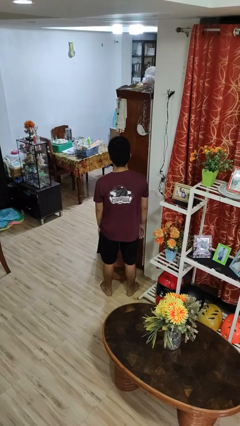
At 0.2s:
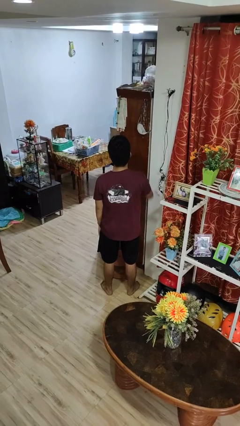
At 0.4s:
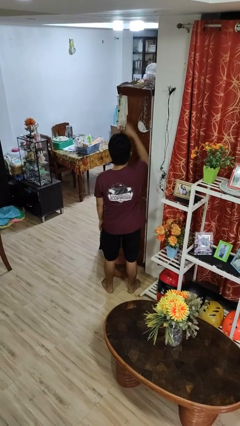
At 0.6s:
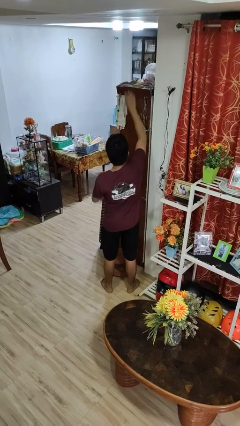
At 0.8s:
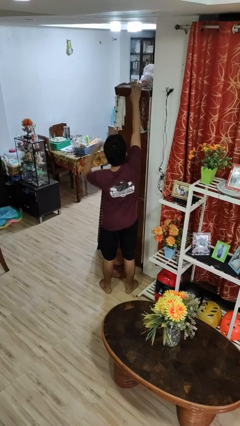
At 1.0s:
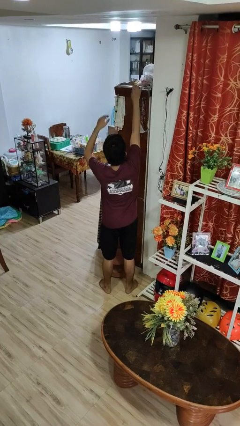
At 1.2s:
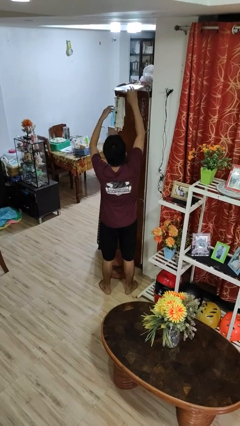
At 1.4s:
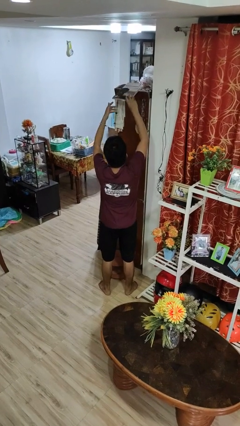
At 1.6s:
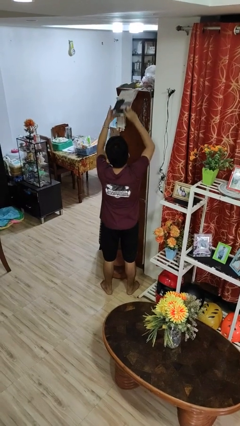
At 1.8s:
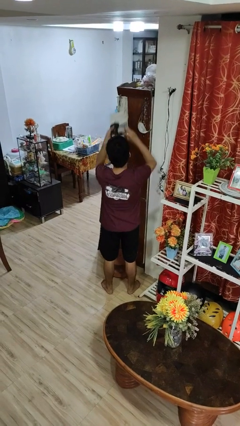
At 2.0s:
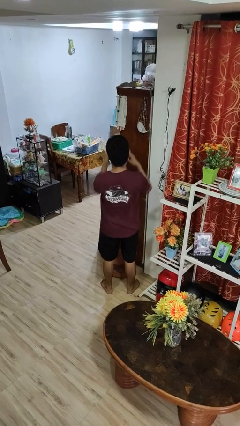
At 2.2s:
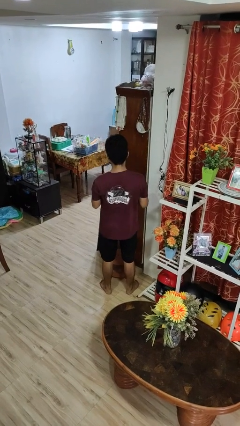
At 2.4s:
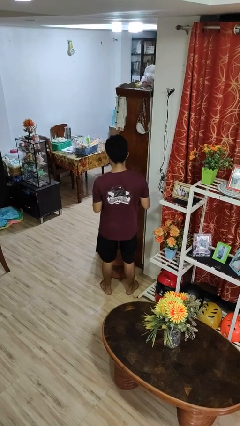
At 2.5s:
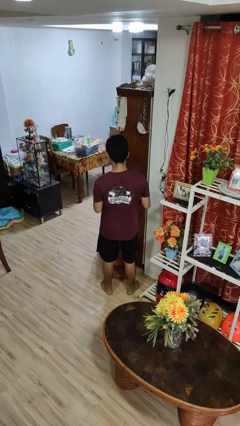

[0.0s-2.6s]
person picks up object from shelf

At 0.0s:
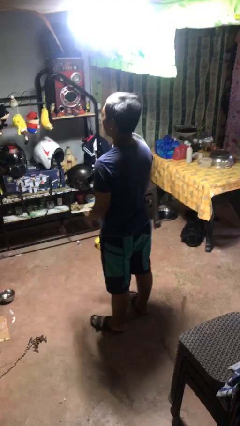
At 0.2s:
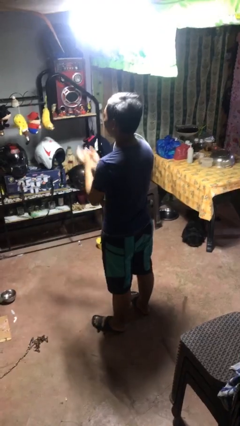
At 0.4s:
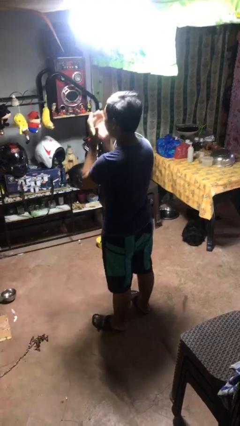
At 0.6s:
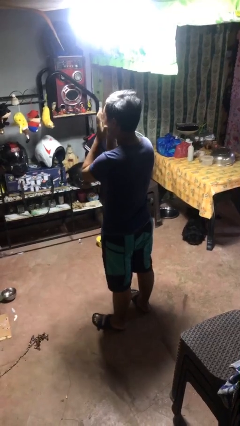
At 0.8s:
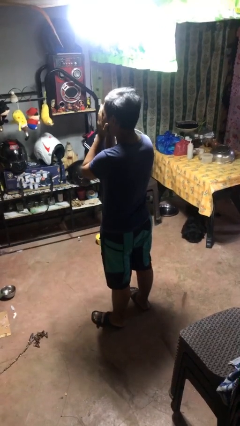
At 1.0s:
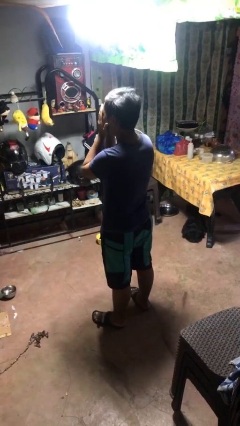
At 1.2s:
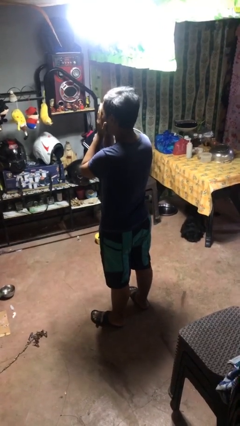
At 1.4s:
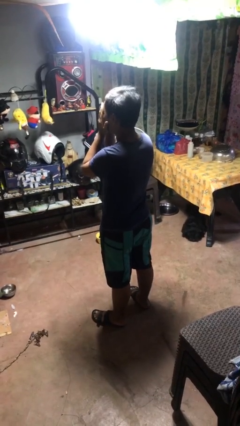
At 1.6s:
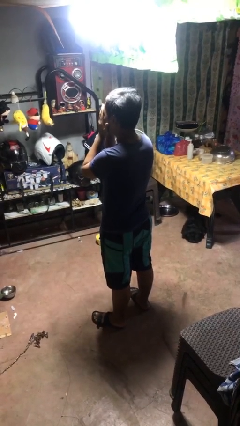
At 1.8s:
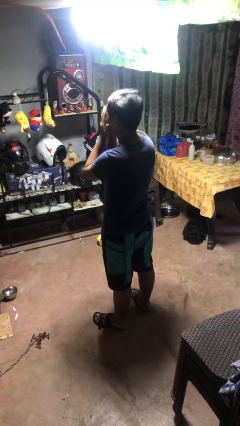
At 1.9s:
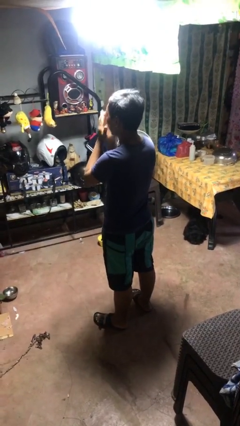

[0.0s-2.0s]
person covers face with hands

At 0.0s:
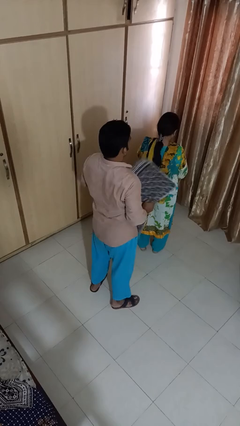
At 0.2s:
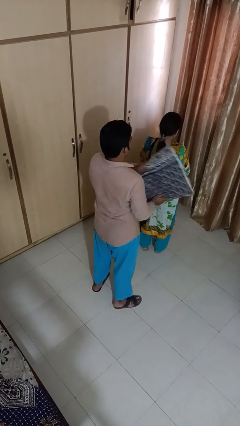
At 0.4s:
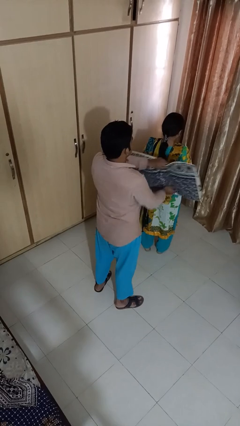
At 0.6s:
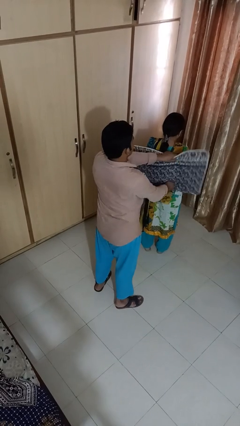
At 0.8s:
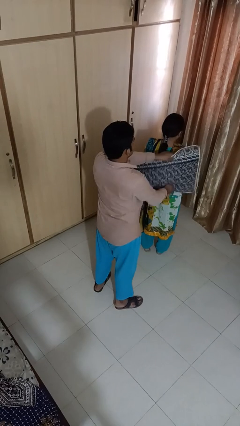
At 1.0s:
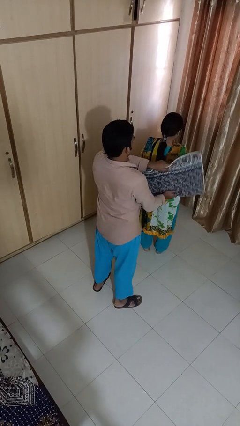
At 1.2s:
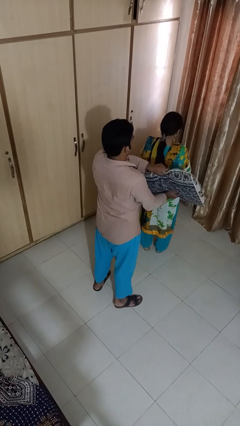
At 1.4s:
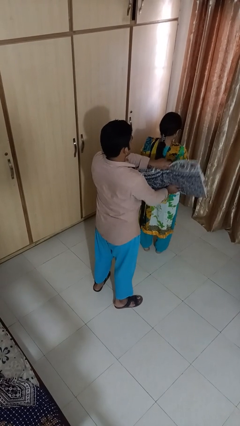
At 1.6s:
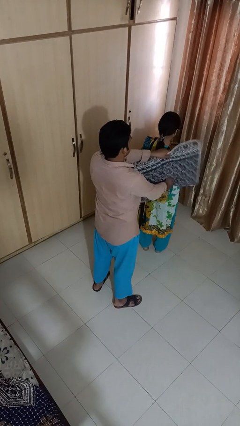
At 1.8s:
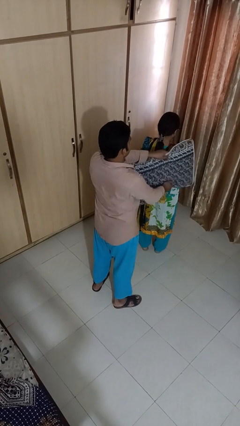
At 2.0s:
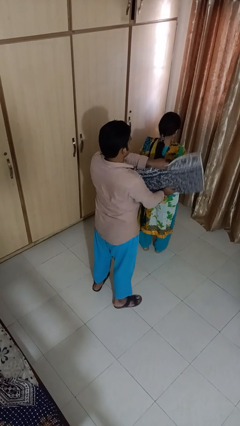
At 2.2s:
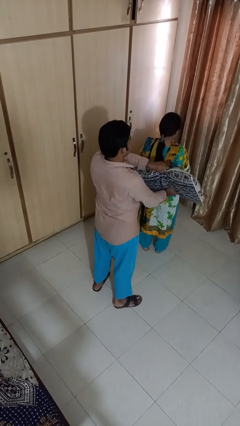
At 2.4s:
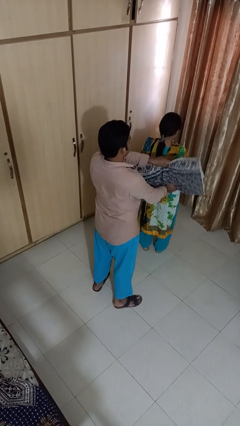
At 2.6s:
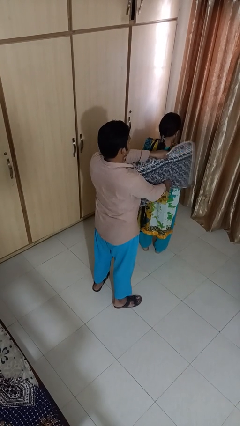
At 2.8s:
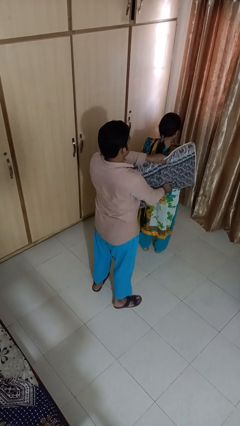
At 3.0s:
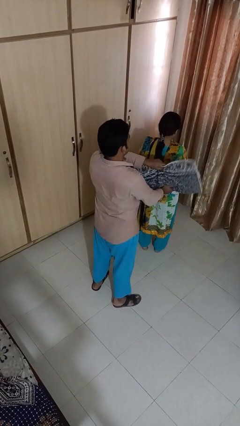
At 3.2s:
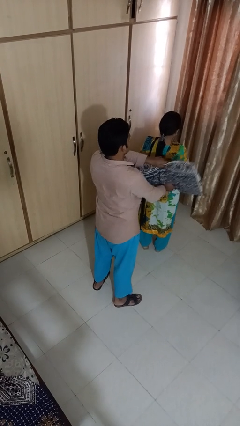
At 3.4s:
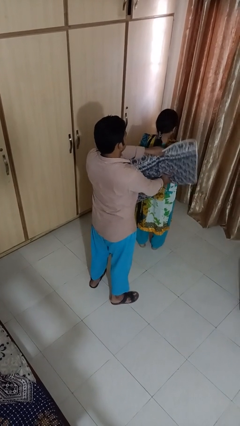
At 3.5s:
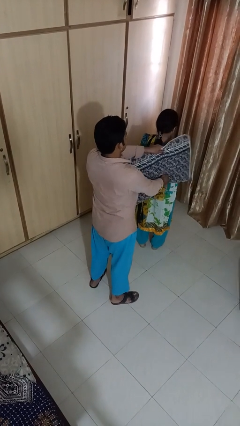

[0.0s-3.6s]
person hits person with pillow

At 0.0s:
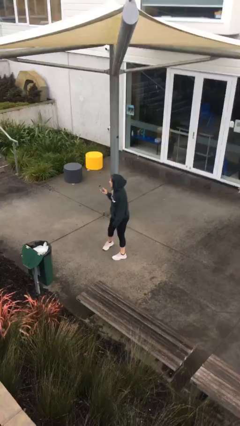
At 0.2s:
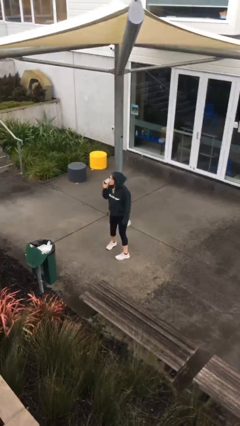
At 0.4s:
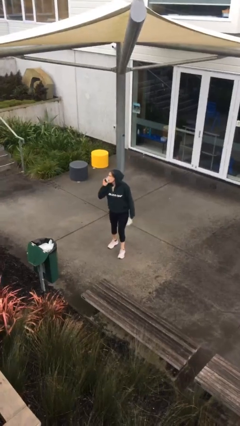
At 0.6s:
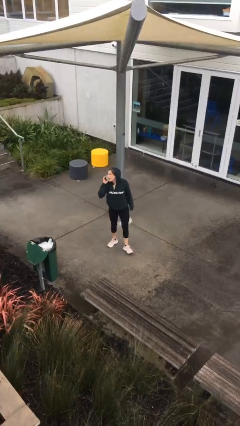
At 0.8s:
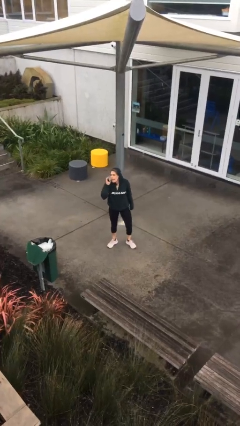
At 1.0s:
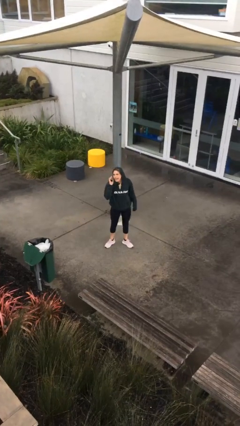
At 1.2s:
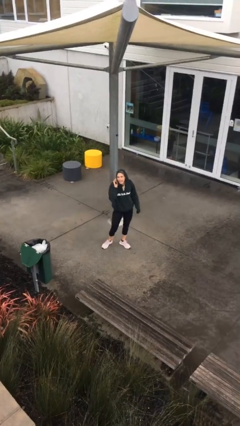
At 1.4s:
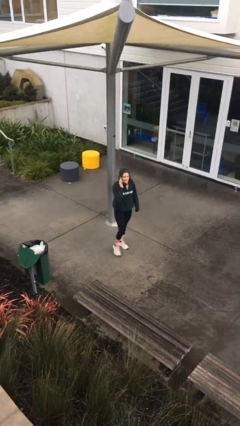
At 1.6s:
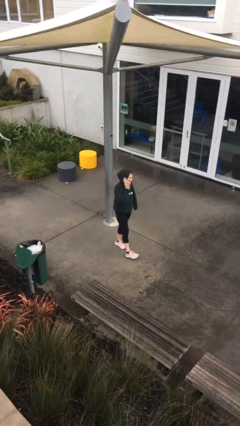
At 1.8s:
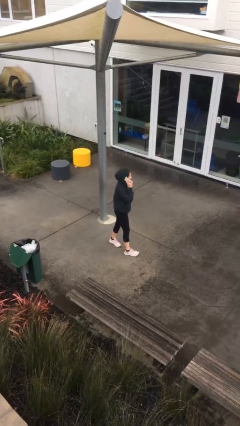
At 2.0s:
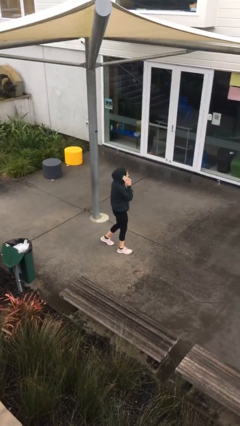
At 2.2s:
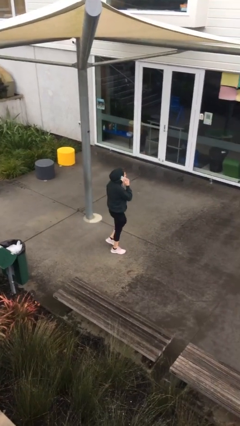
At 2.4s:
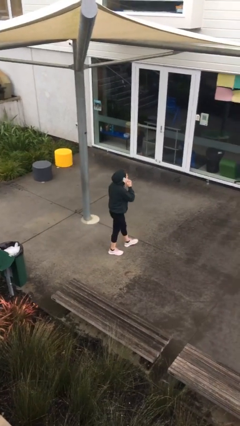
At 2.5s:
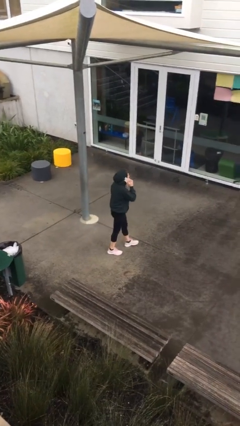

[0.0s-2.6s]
person talks on phone

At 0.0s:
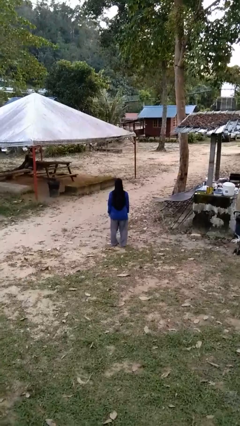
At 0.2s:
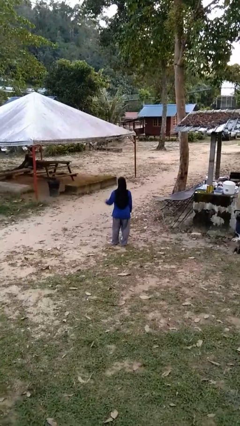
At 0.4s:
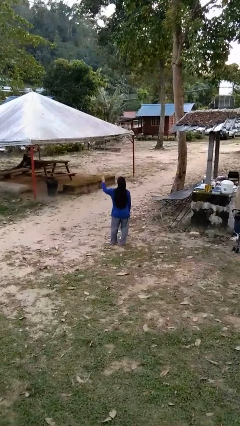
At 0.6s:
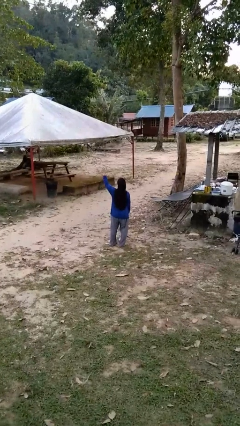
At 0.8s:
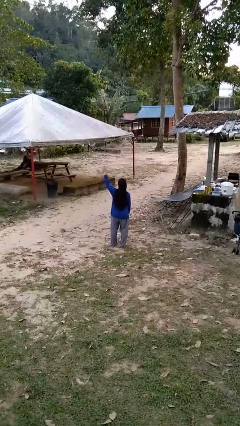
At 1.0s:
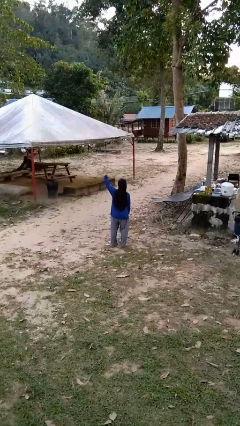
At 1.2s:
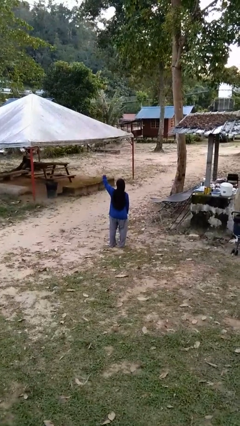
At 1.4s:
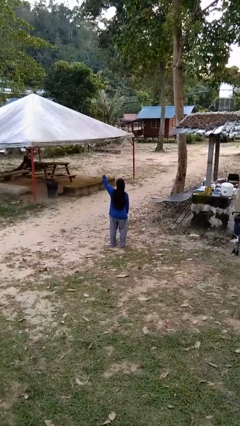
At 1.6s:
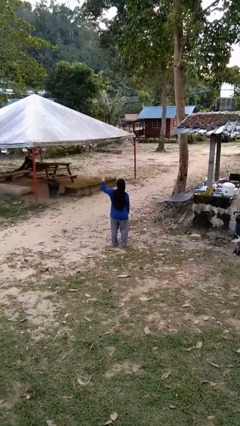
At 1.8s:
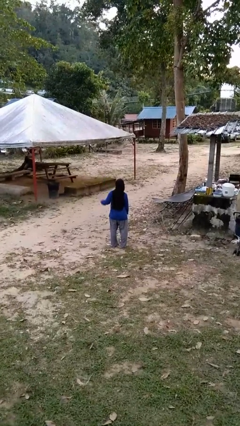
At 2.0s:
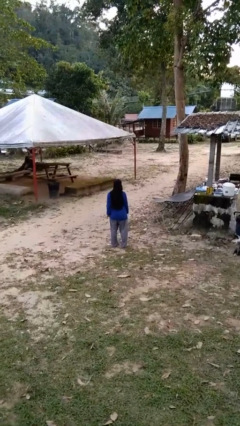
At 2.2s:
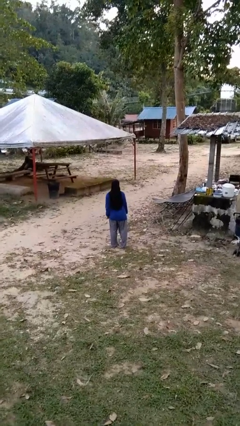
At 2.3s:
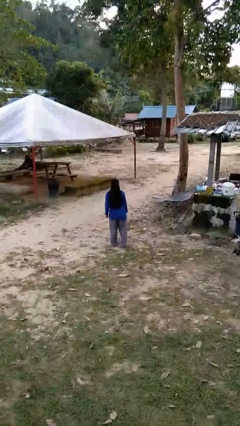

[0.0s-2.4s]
person gestures number four

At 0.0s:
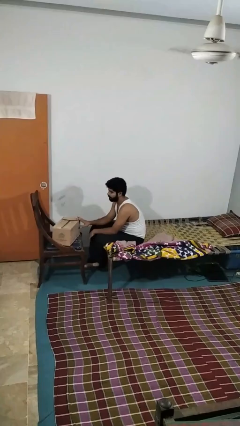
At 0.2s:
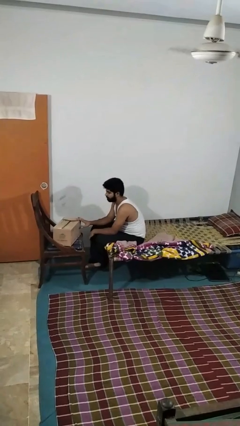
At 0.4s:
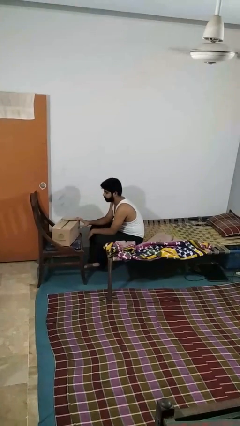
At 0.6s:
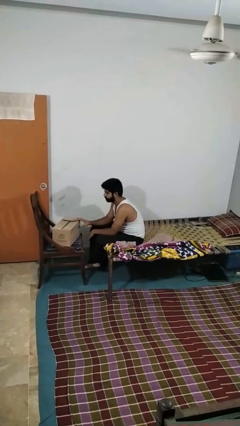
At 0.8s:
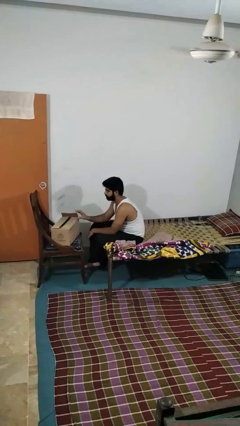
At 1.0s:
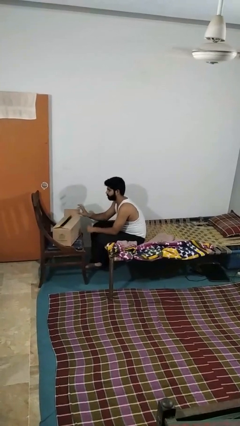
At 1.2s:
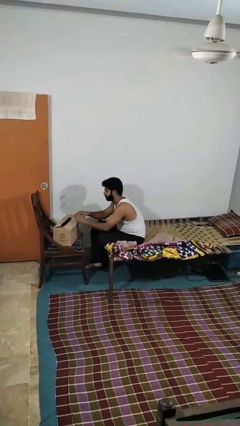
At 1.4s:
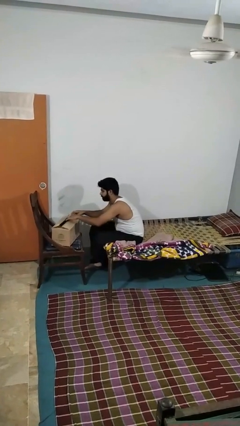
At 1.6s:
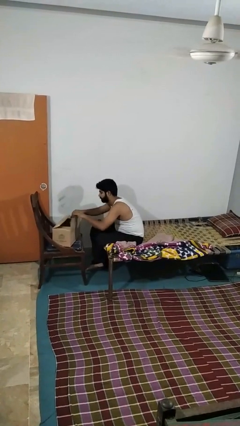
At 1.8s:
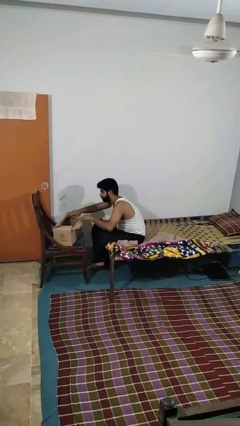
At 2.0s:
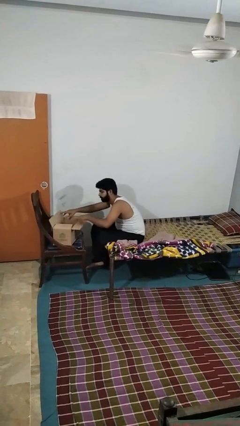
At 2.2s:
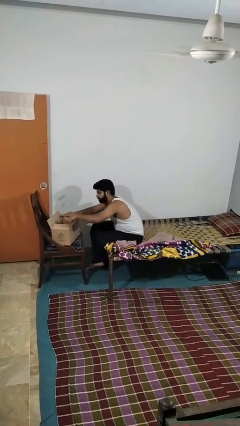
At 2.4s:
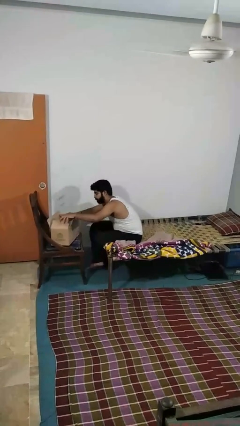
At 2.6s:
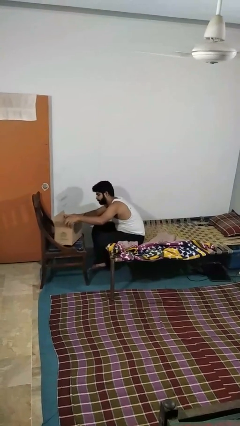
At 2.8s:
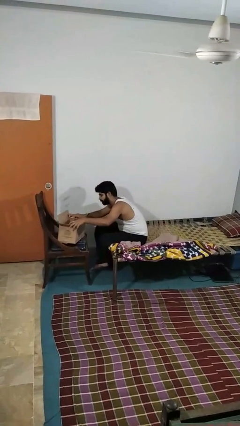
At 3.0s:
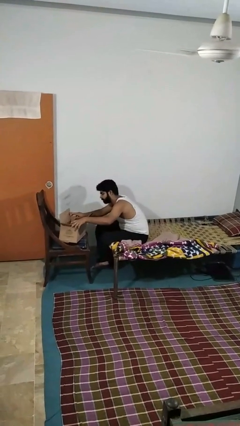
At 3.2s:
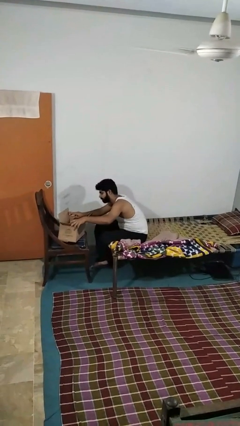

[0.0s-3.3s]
person opens box

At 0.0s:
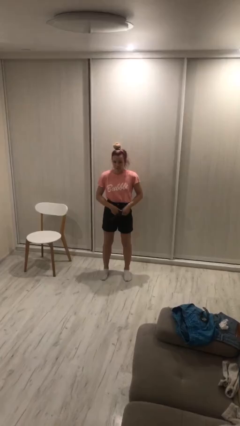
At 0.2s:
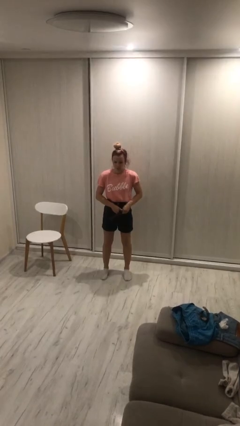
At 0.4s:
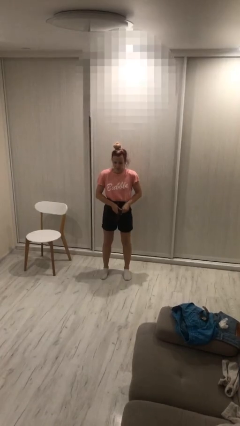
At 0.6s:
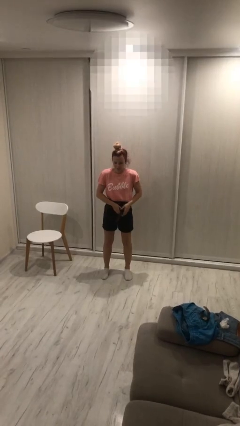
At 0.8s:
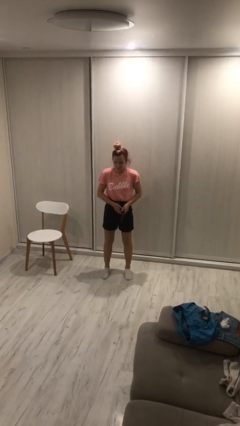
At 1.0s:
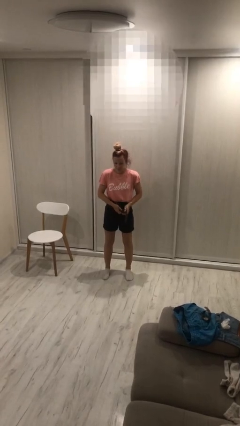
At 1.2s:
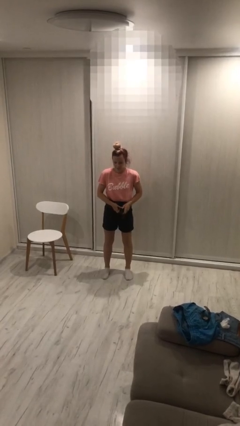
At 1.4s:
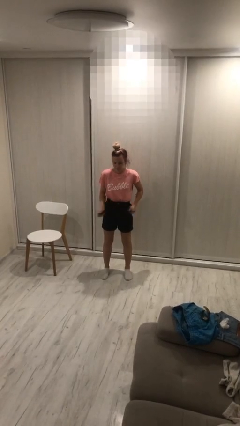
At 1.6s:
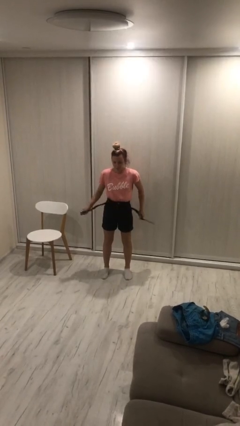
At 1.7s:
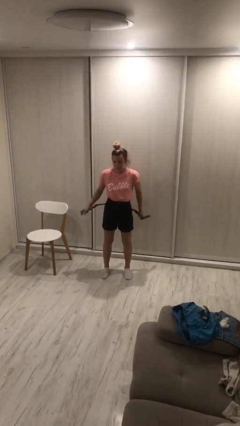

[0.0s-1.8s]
person takes off belt
